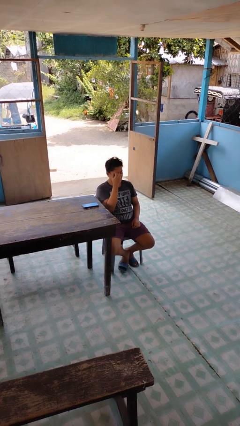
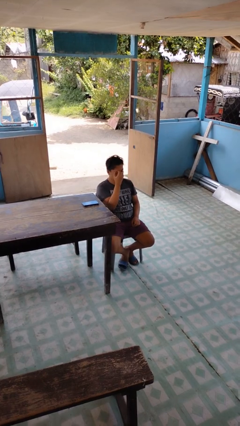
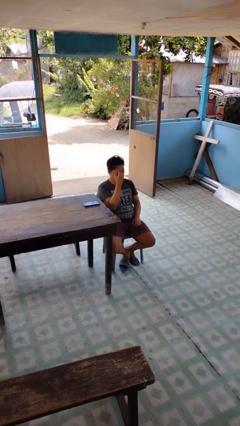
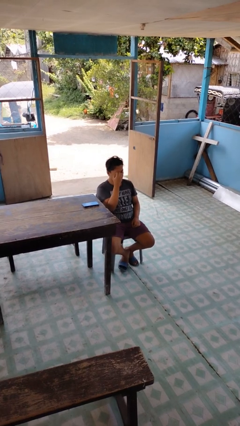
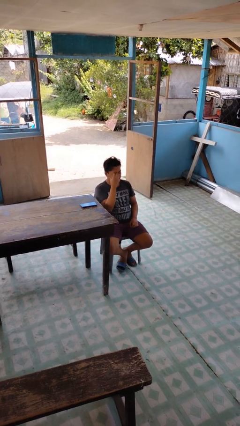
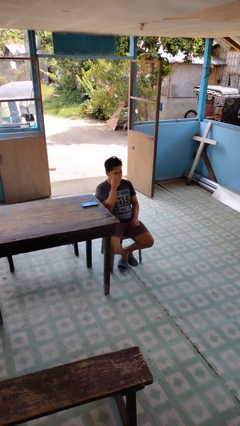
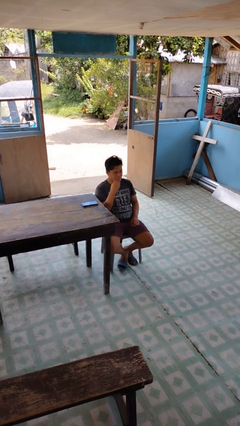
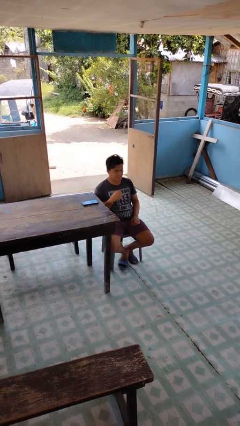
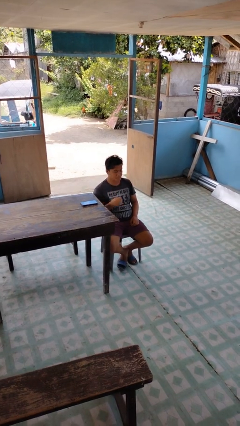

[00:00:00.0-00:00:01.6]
person scratches face

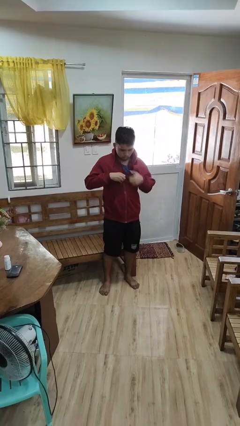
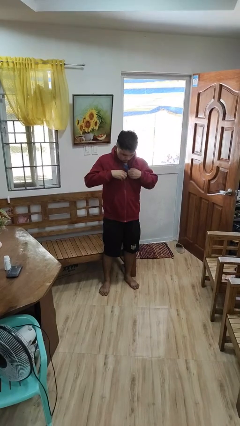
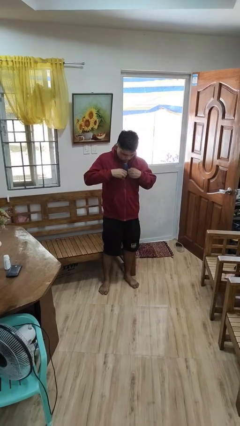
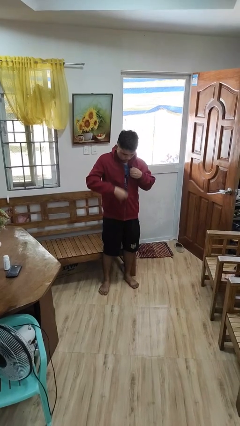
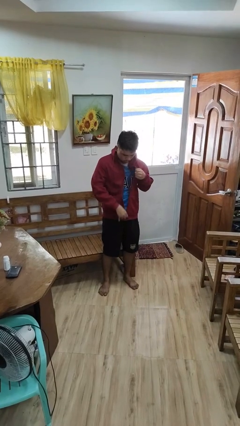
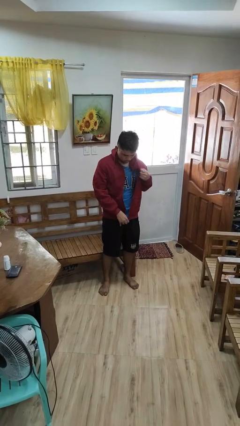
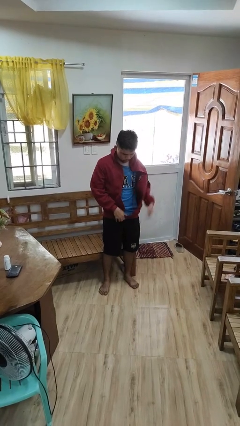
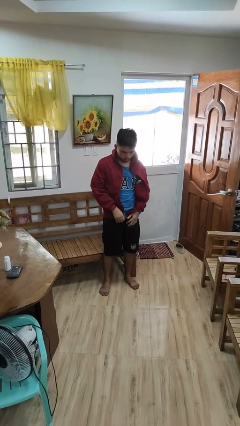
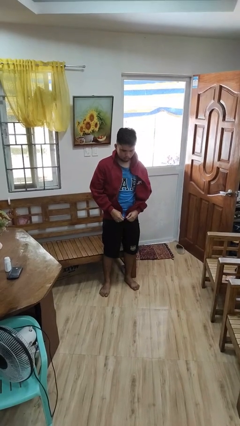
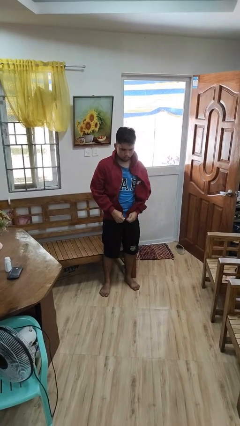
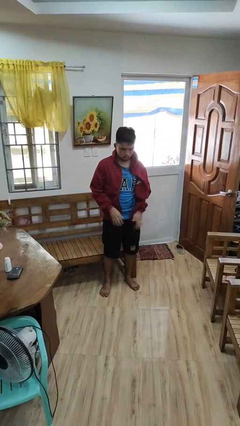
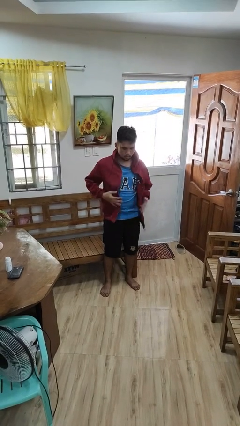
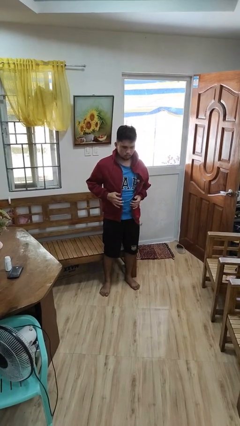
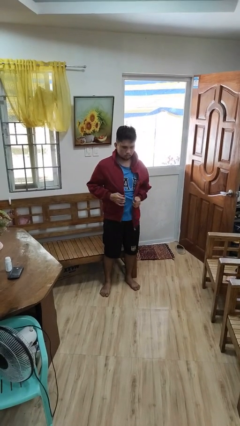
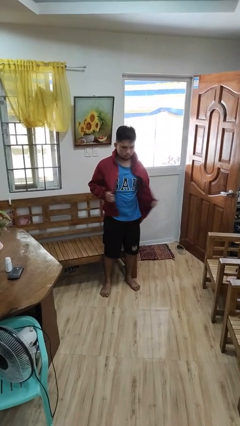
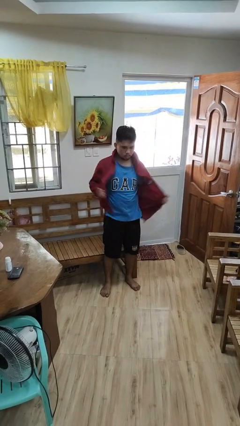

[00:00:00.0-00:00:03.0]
person unzips jacket

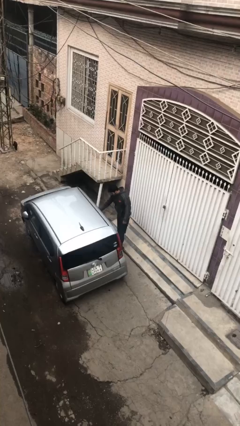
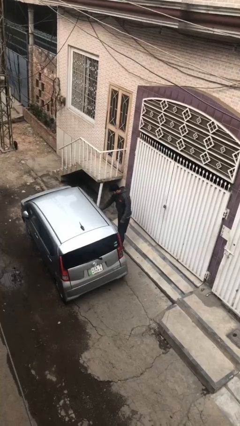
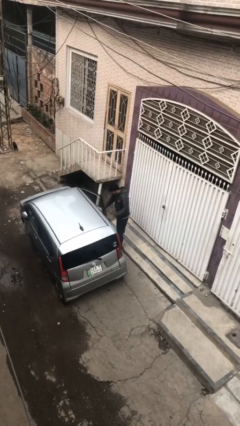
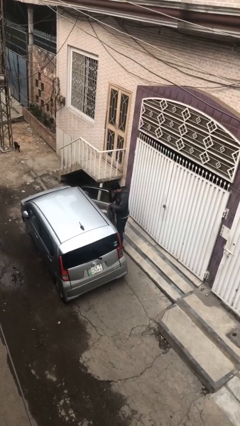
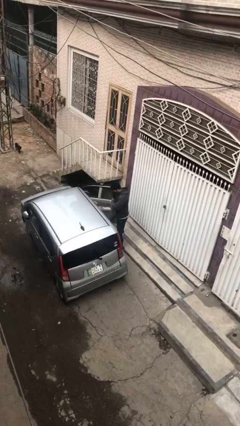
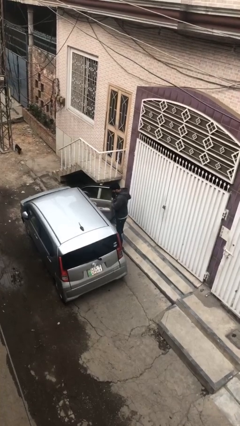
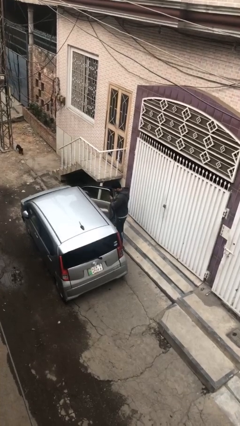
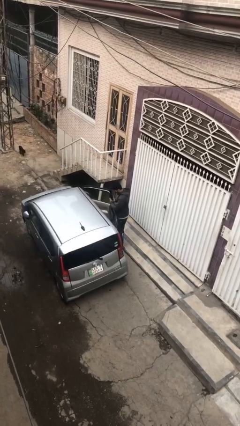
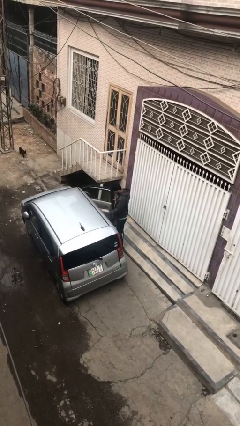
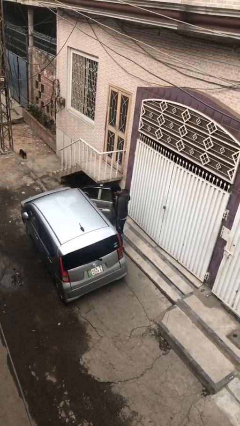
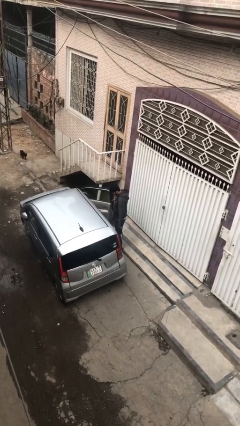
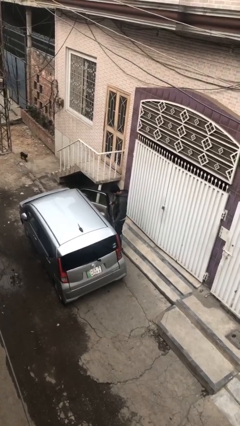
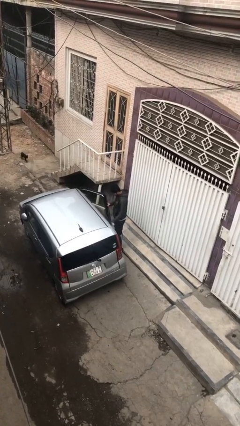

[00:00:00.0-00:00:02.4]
person opens car door

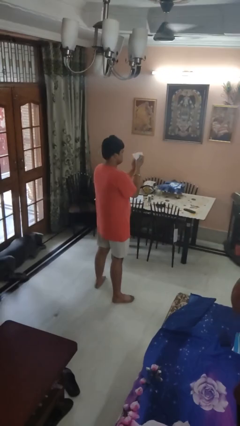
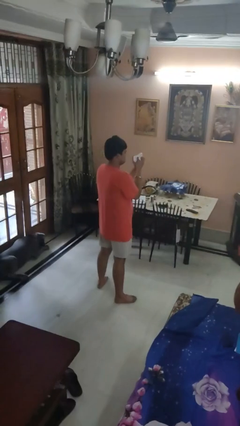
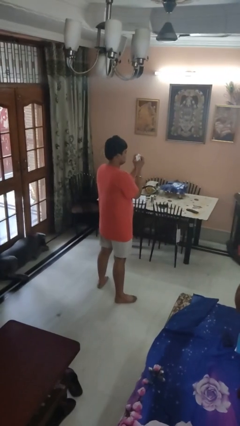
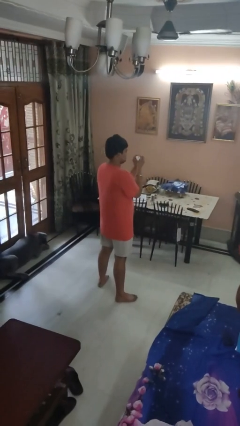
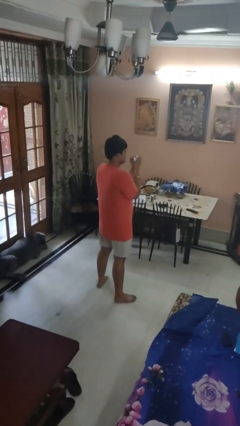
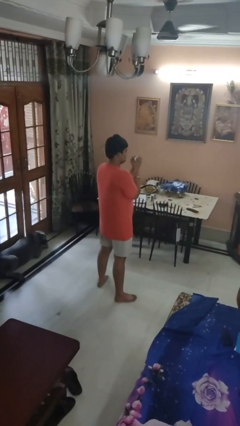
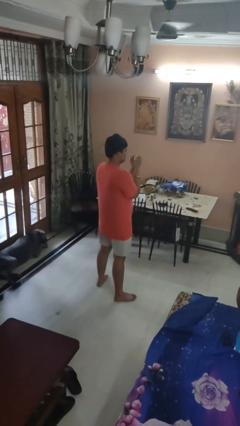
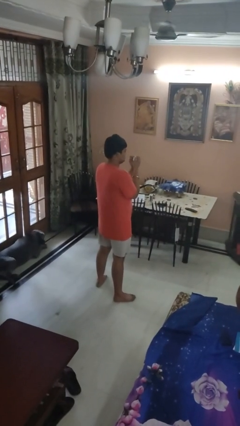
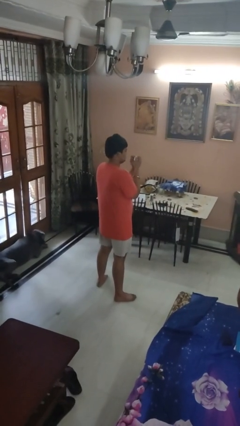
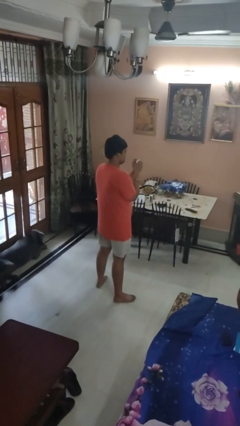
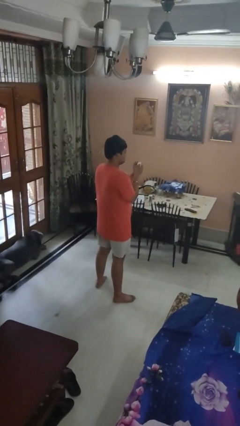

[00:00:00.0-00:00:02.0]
person crumples paper

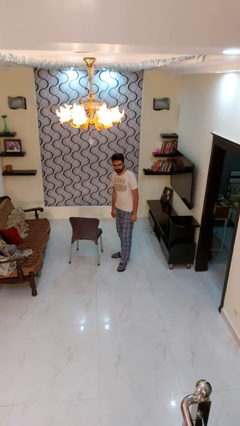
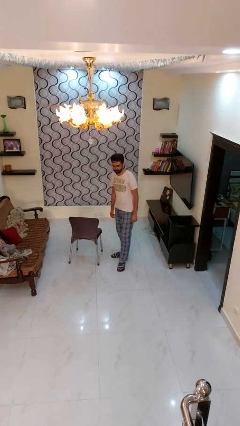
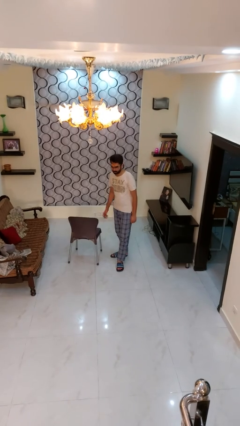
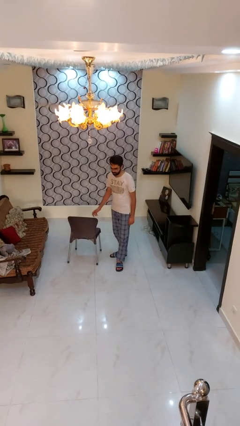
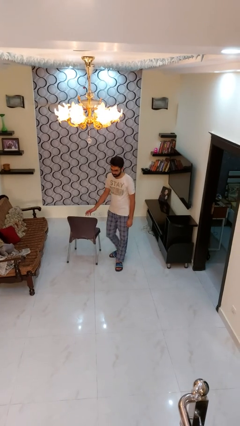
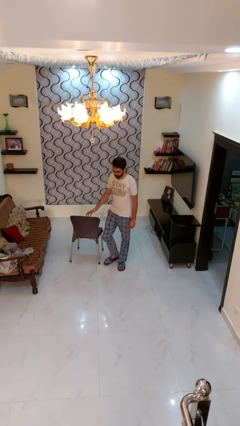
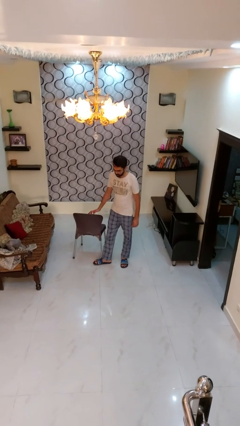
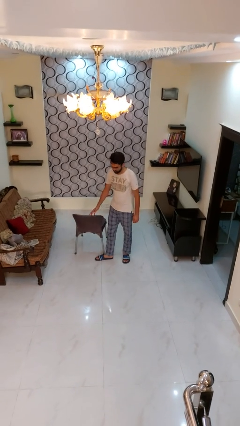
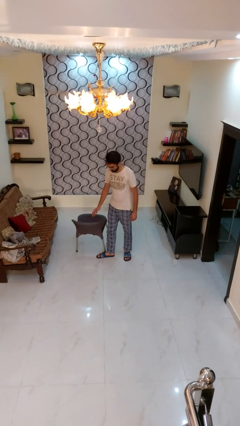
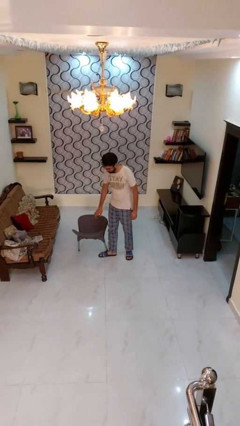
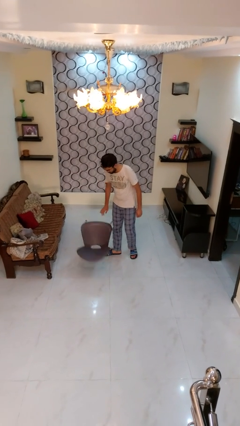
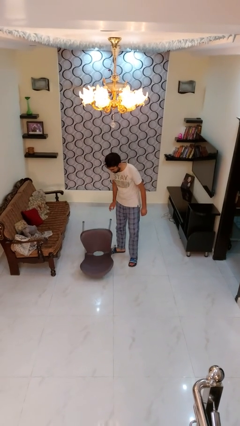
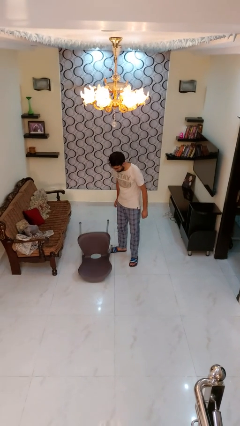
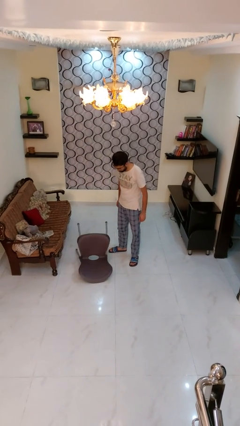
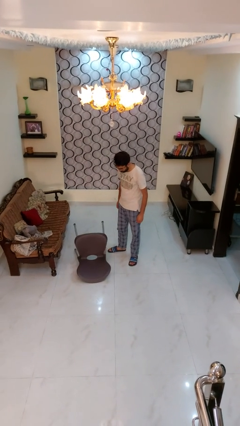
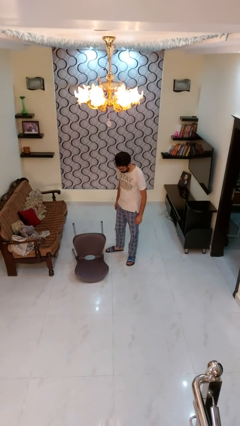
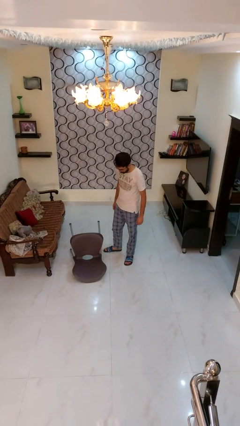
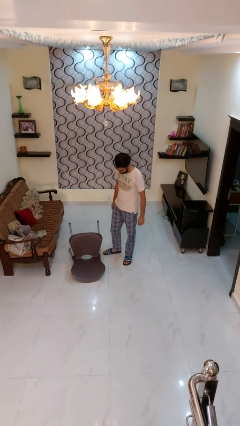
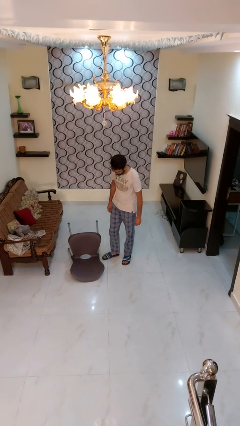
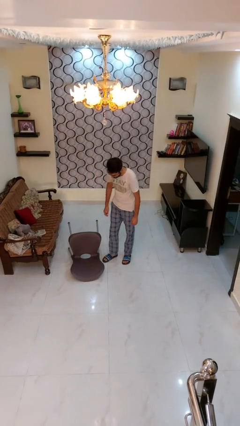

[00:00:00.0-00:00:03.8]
person knocks over furniture

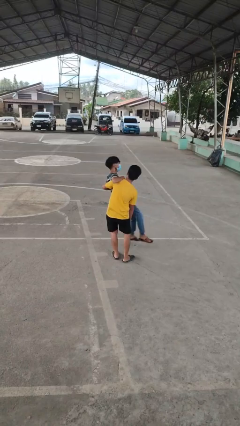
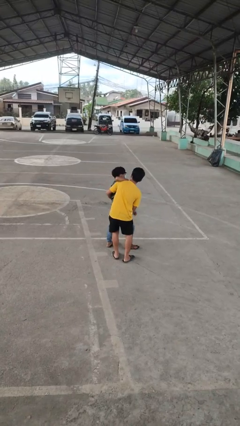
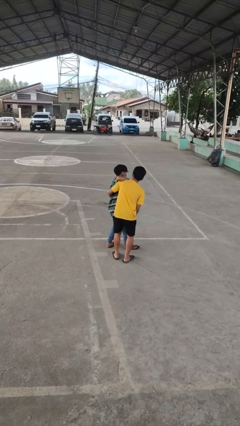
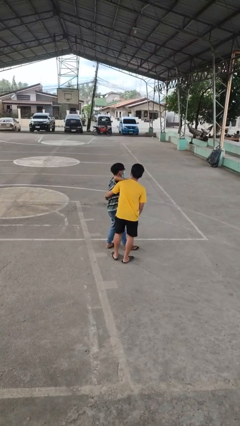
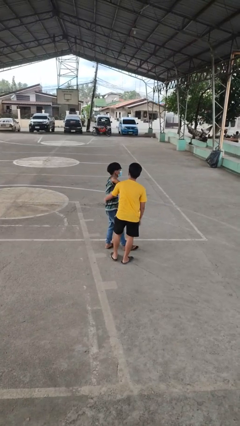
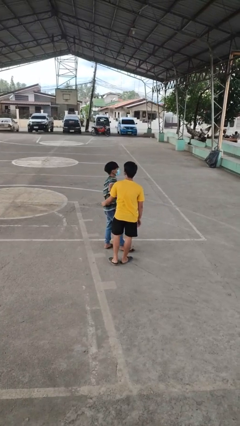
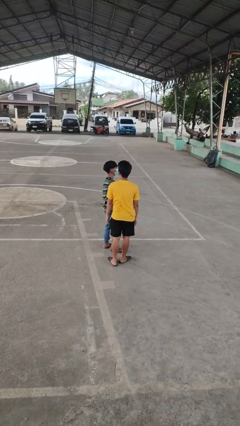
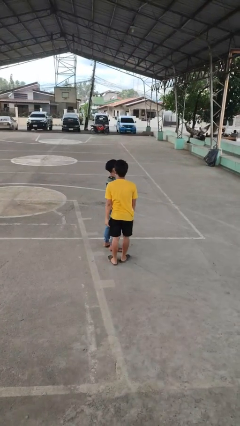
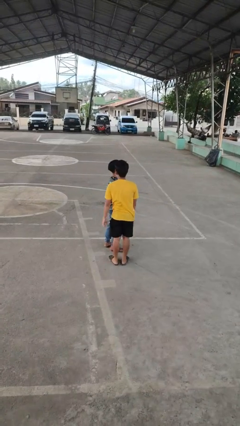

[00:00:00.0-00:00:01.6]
person puts down person

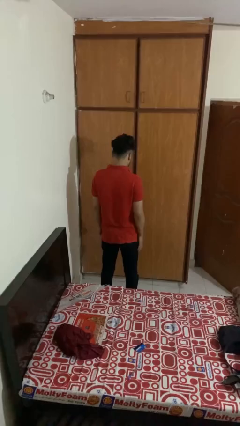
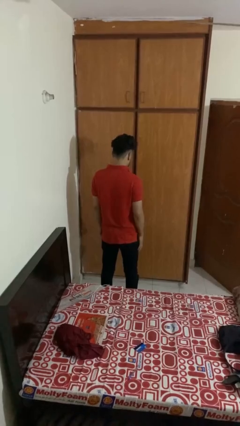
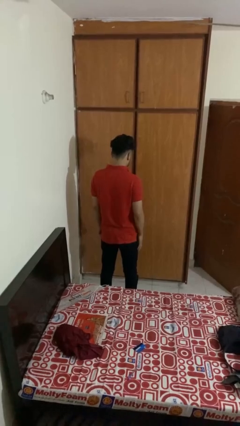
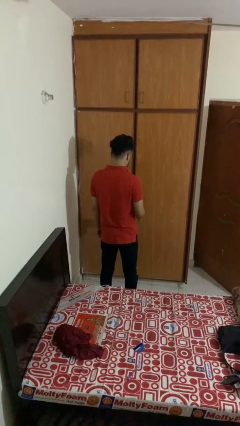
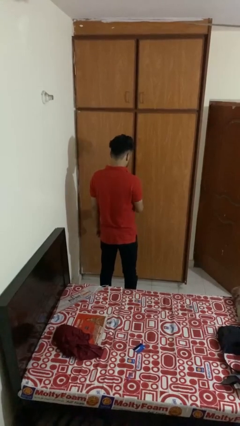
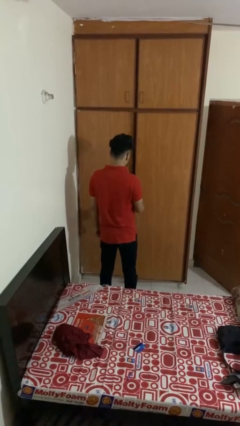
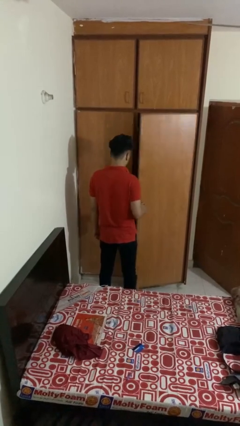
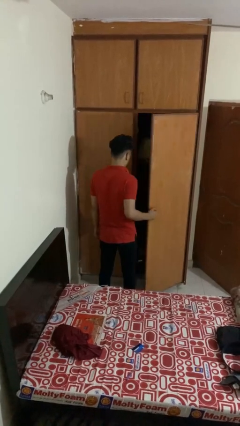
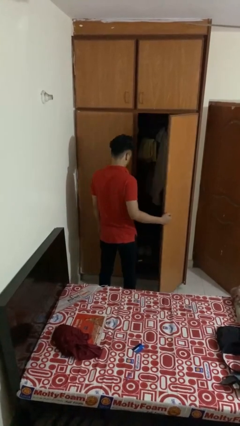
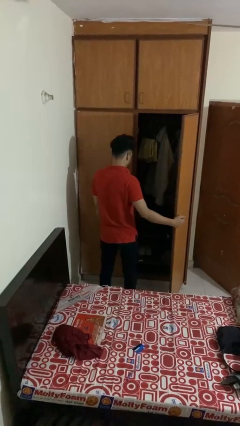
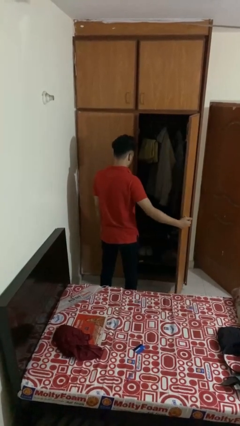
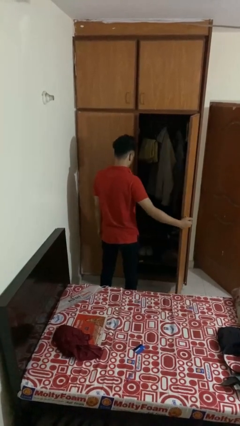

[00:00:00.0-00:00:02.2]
person opens closet door

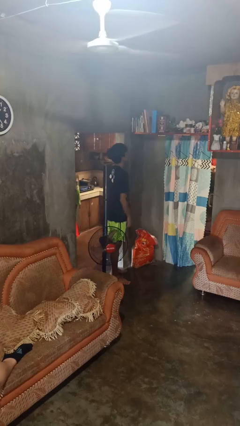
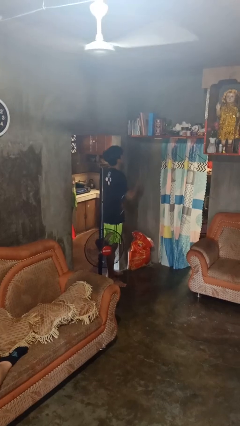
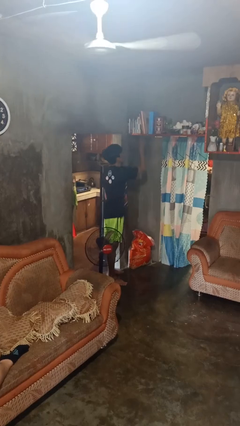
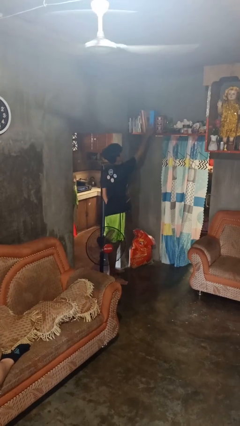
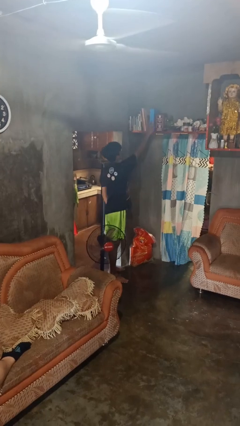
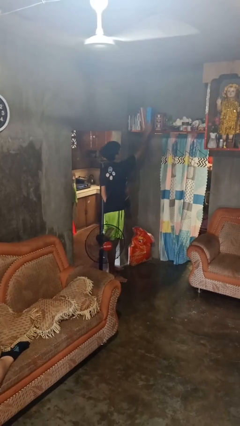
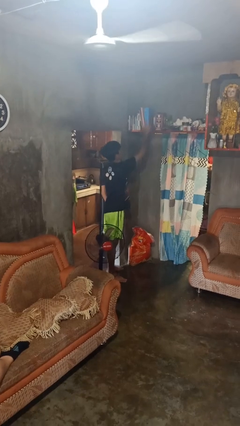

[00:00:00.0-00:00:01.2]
person picks up object from shelf
